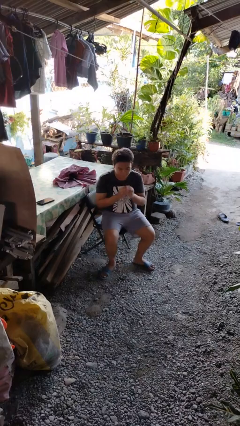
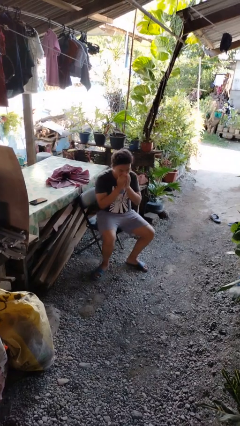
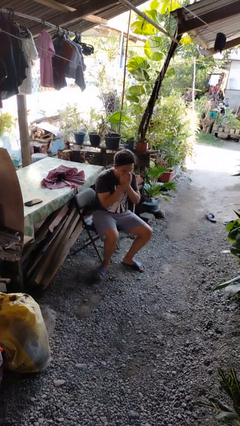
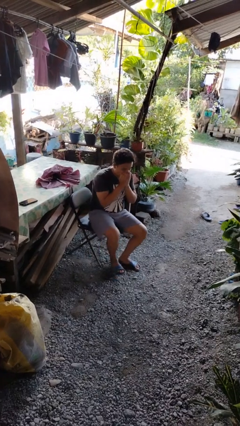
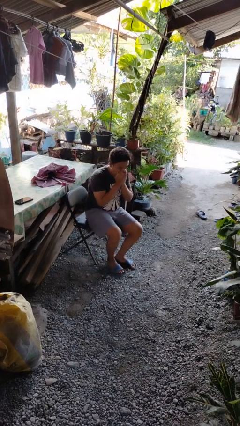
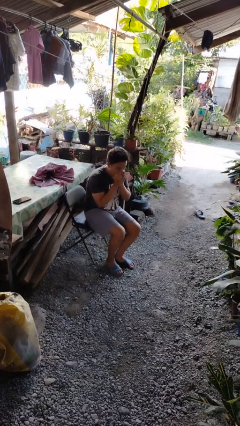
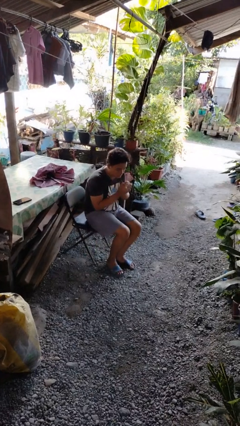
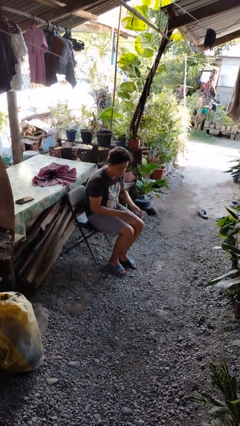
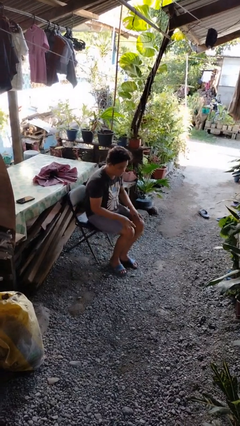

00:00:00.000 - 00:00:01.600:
person blows into hands

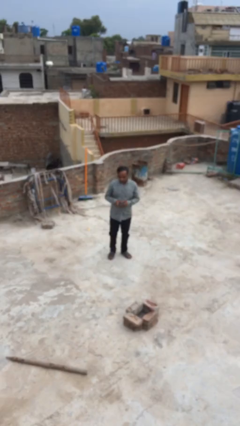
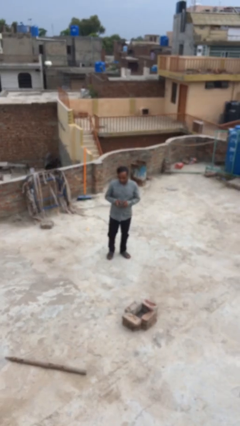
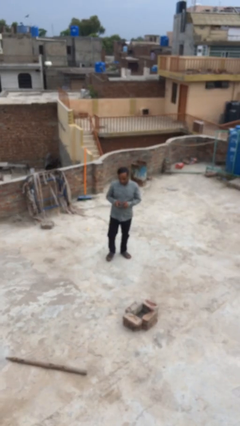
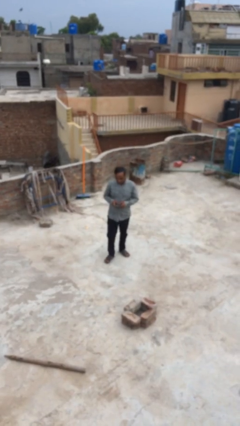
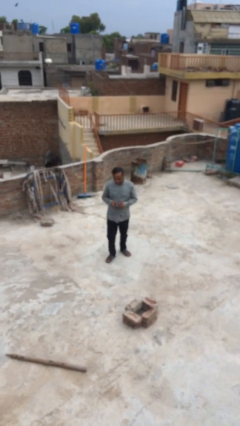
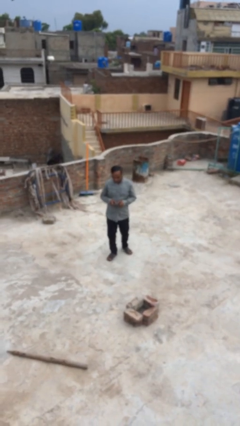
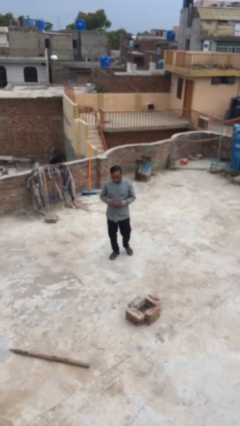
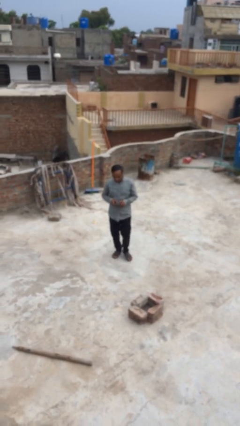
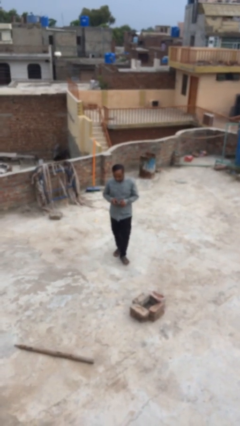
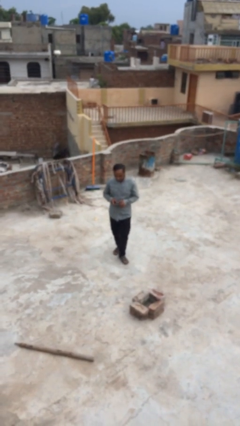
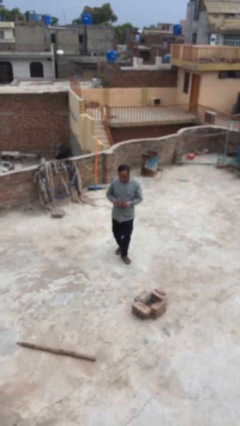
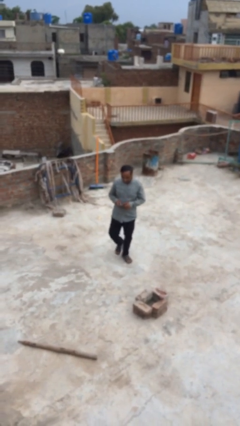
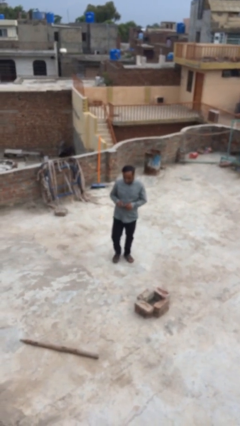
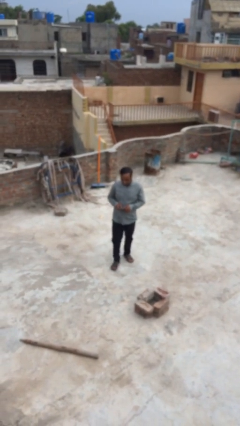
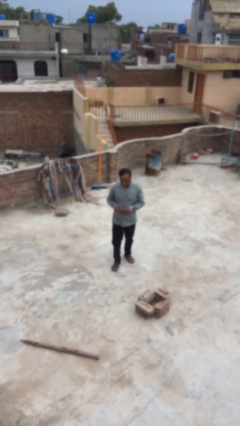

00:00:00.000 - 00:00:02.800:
person texts on phone

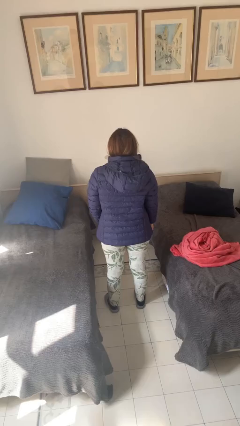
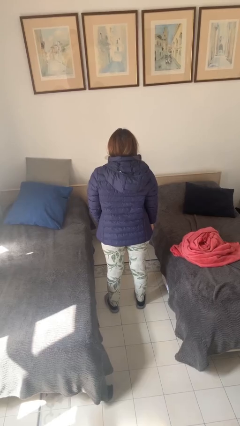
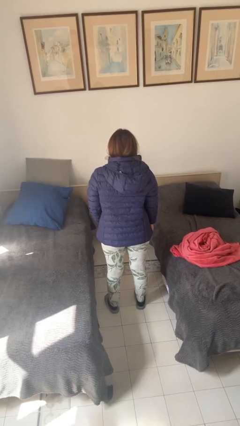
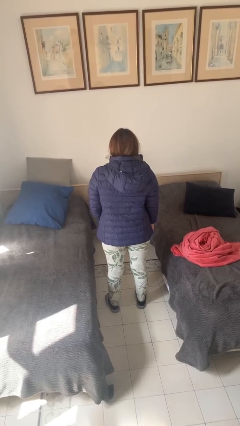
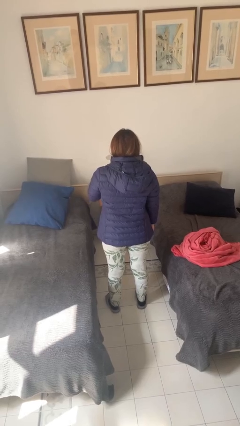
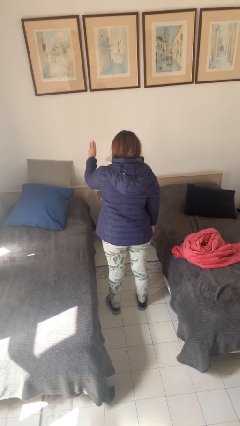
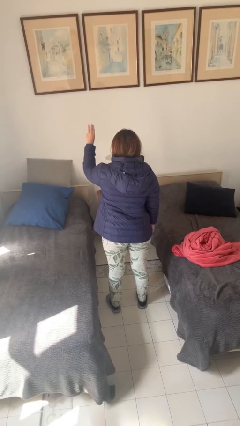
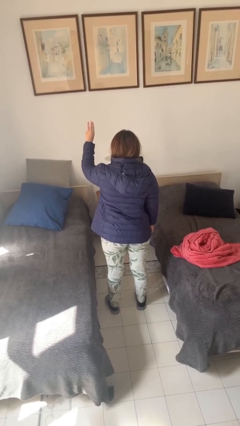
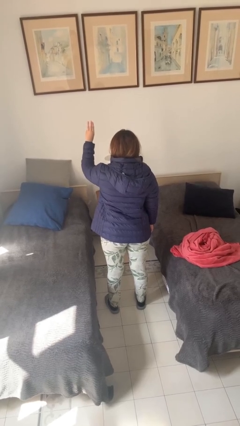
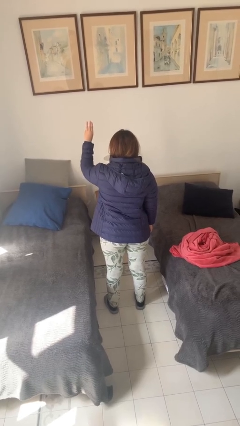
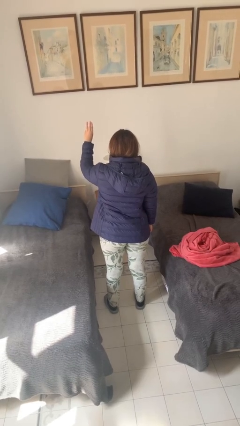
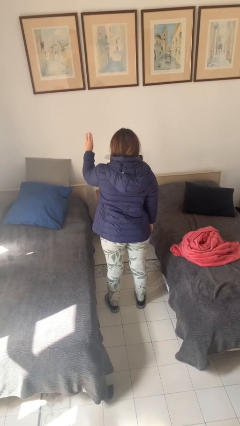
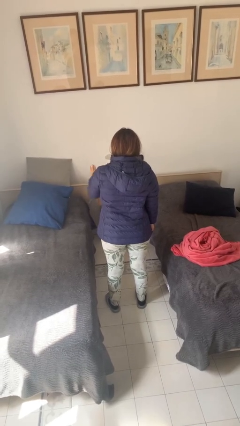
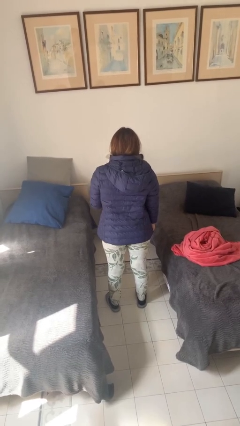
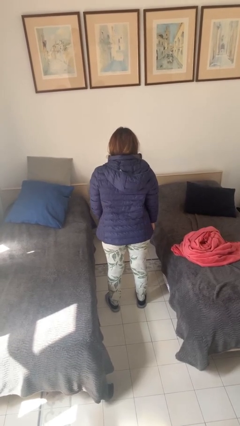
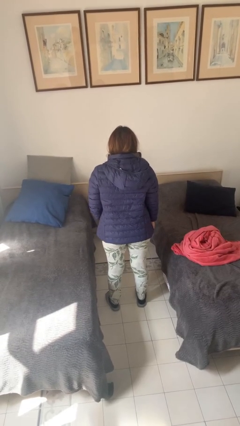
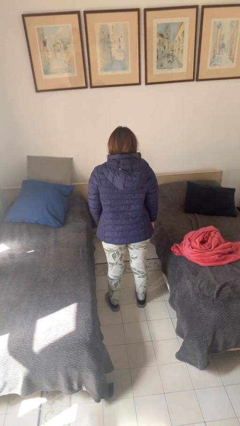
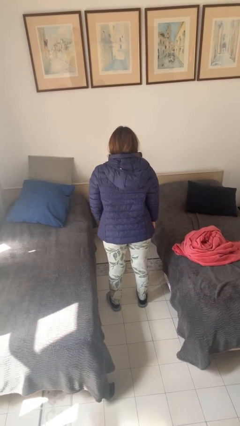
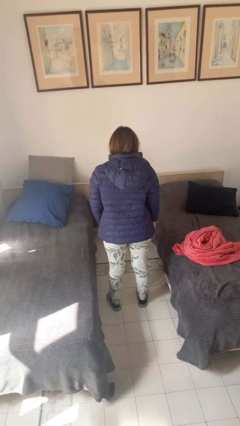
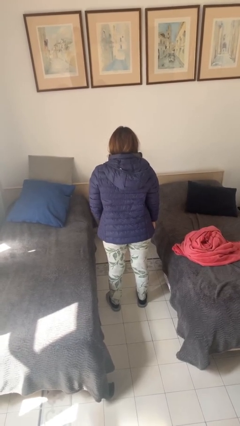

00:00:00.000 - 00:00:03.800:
person gestures number three

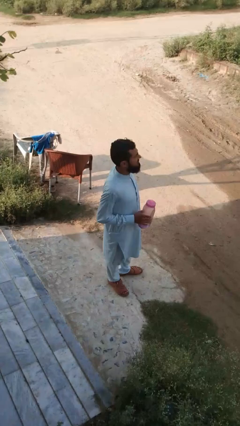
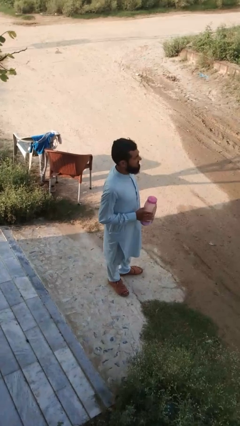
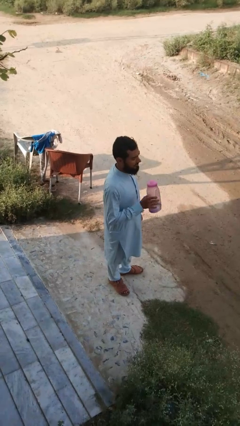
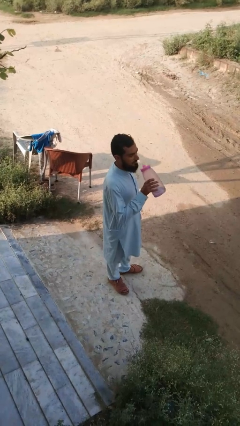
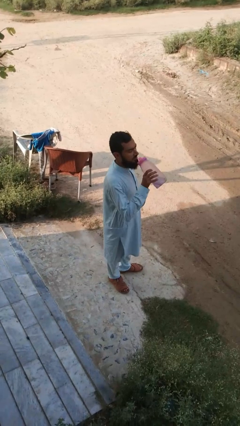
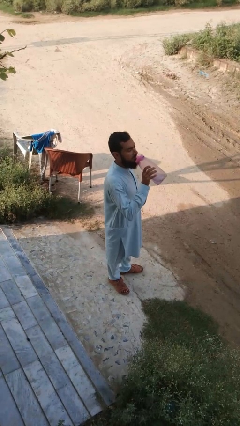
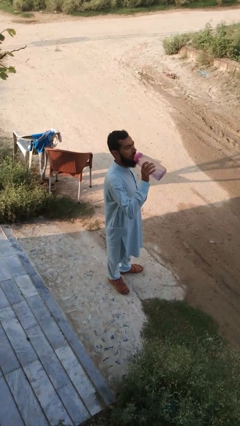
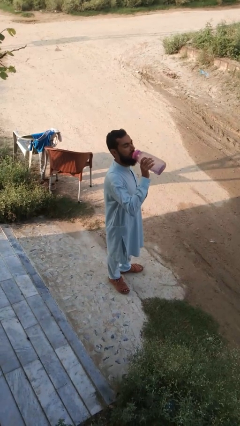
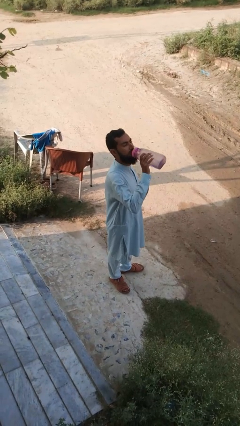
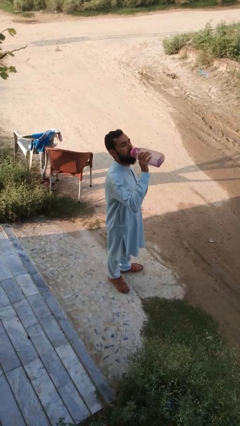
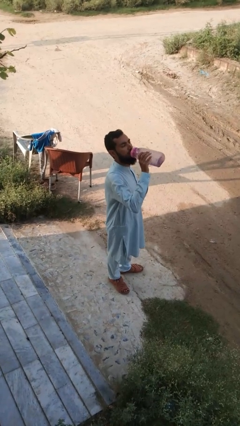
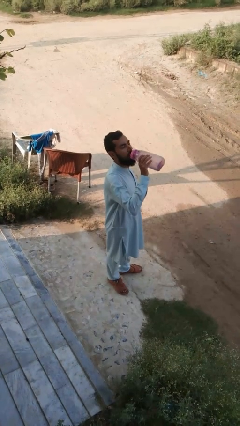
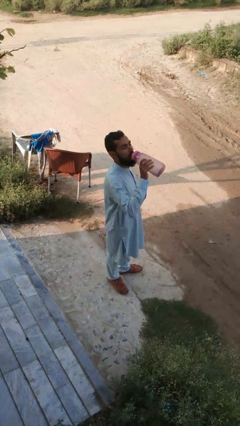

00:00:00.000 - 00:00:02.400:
person drinks from bottle

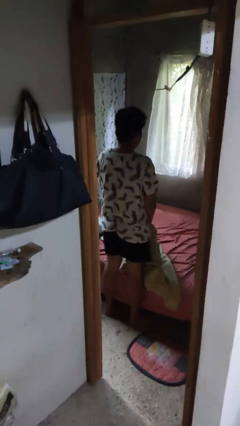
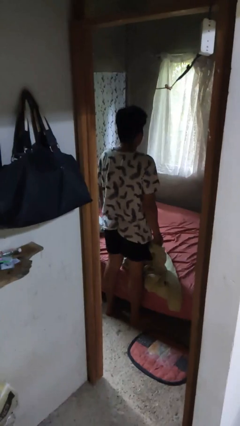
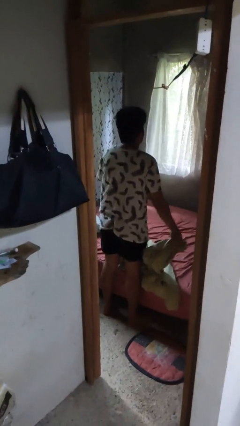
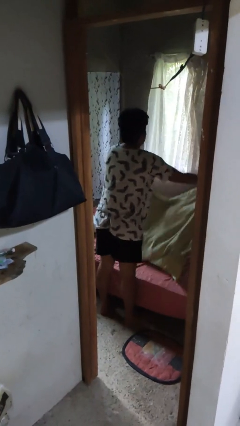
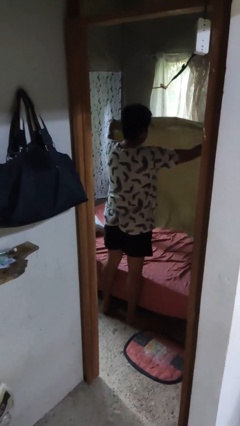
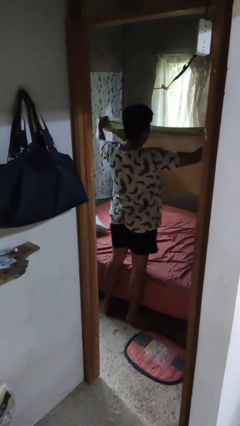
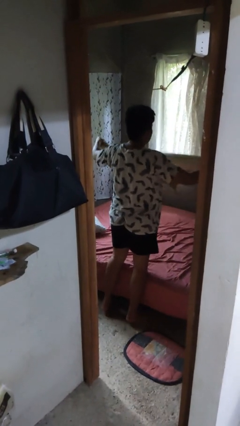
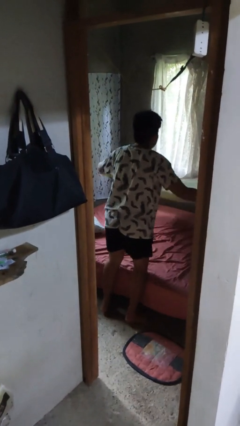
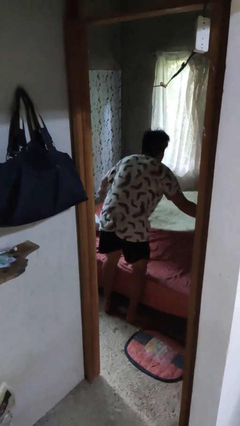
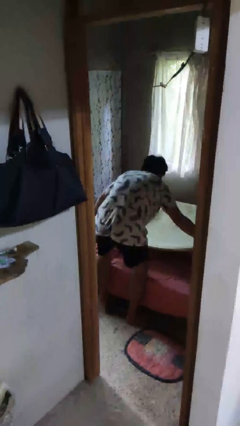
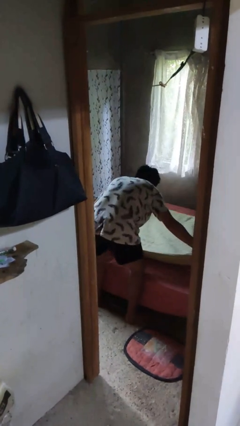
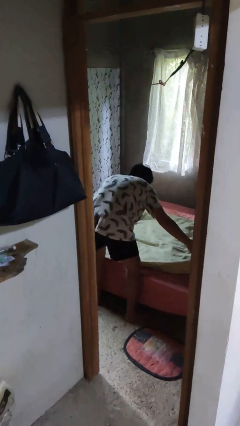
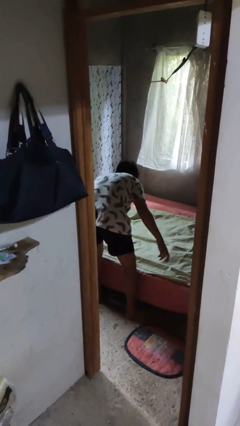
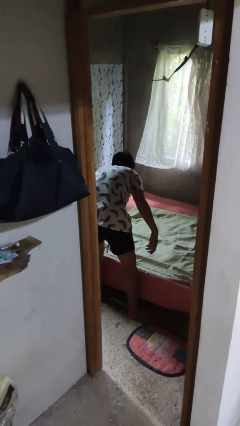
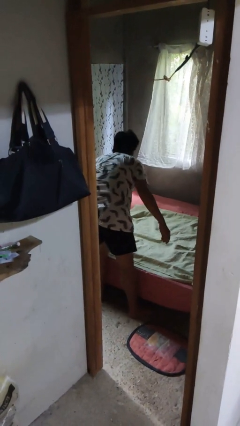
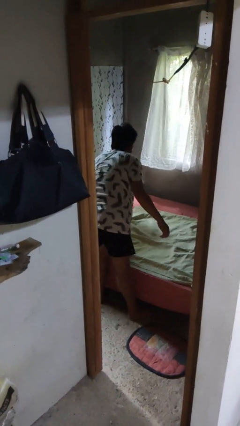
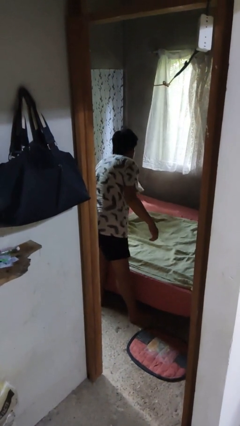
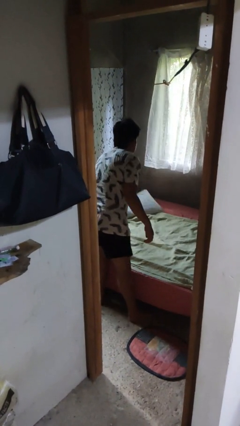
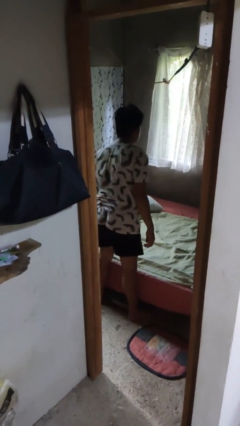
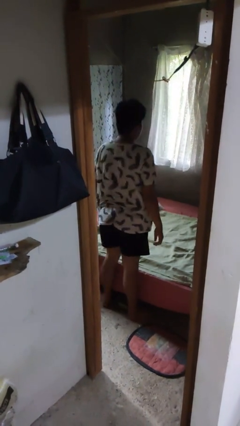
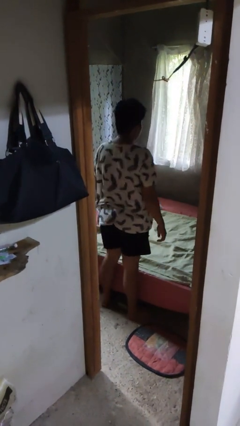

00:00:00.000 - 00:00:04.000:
person makes bed

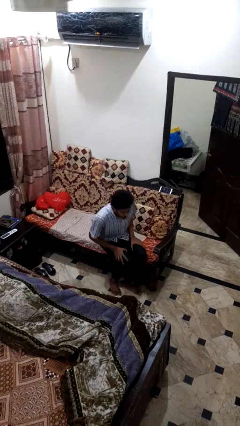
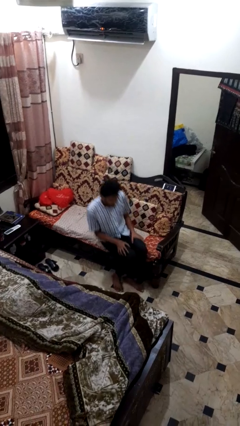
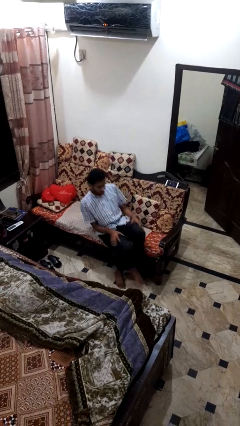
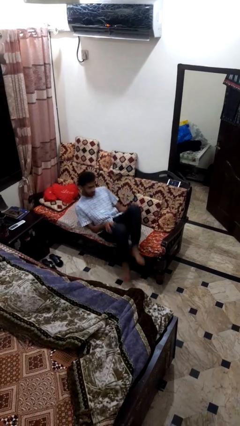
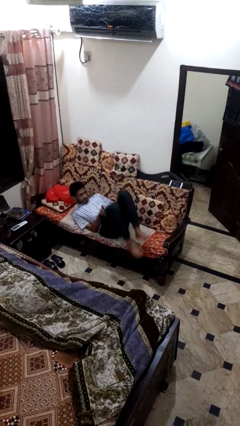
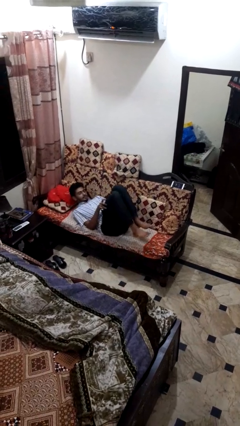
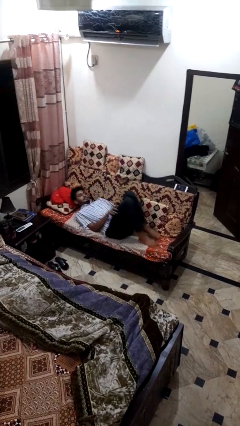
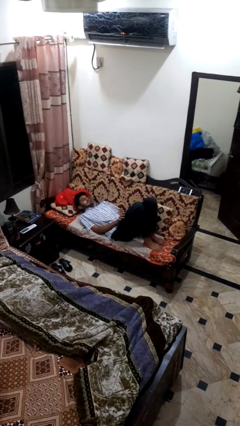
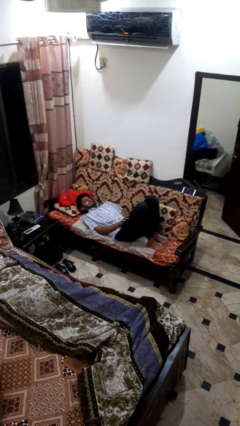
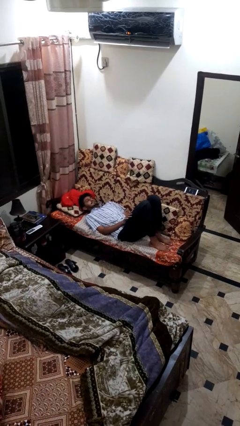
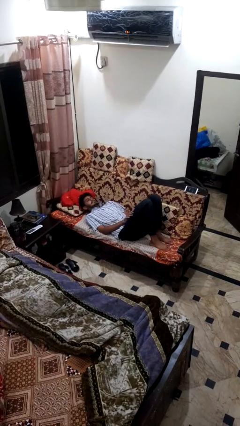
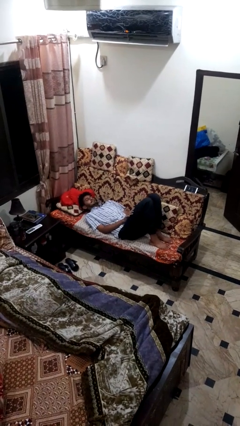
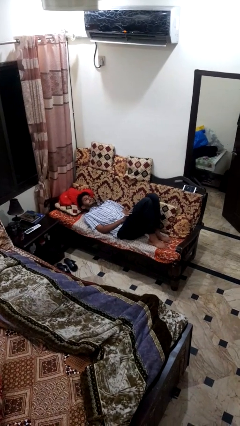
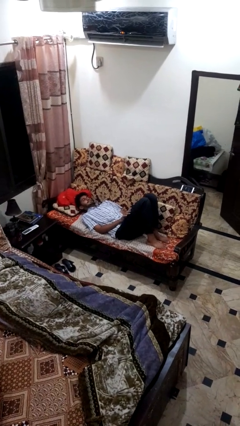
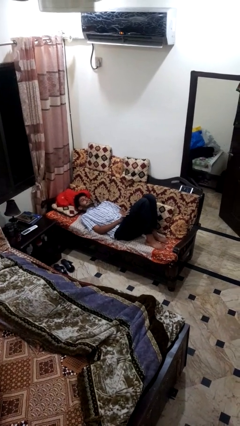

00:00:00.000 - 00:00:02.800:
person lies down on couch
